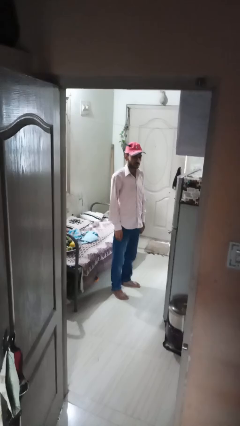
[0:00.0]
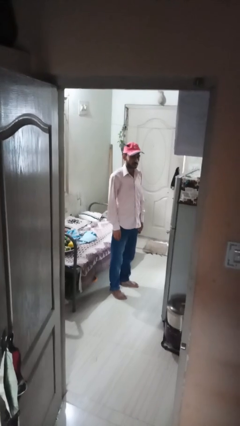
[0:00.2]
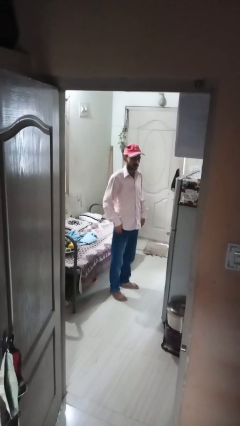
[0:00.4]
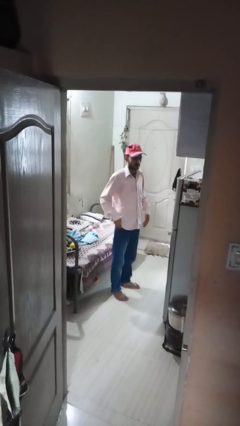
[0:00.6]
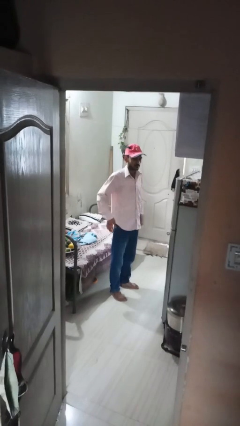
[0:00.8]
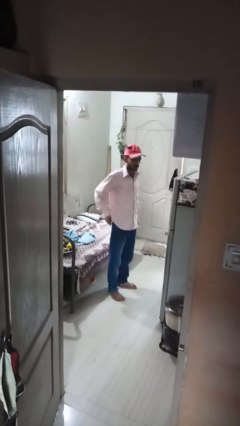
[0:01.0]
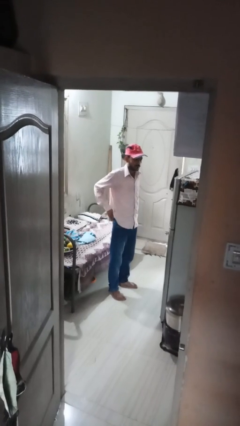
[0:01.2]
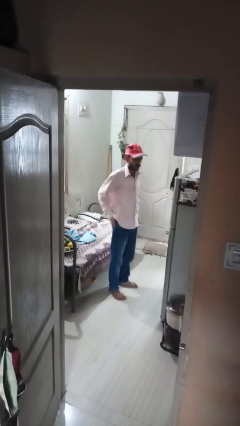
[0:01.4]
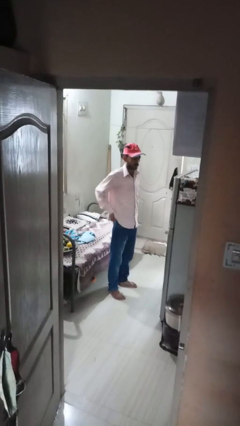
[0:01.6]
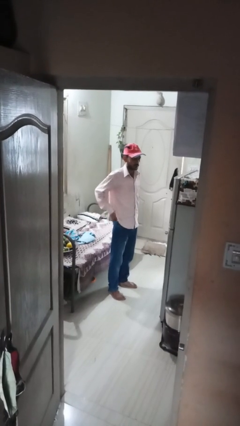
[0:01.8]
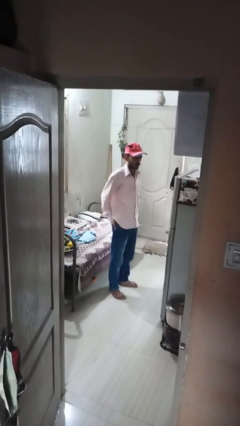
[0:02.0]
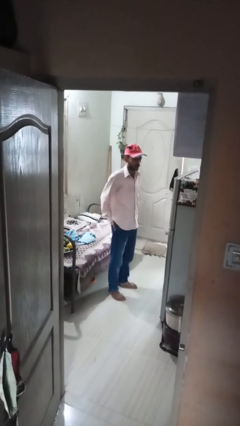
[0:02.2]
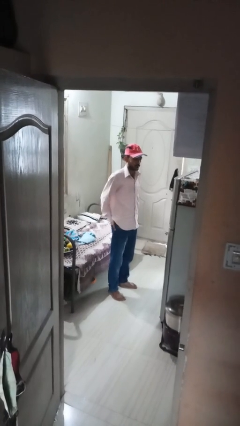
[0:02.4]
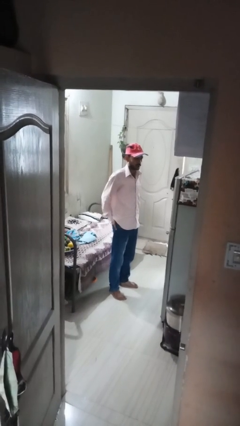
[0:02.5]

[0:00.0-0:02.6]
person puts hands in back pockets

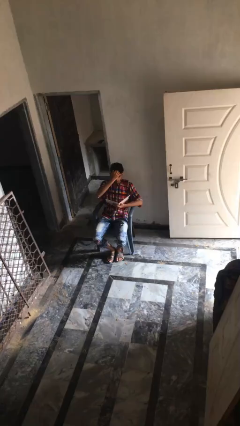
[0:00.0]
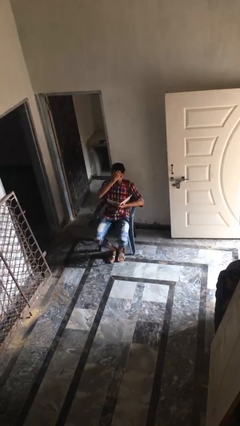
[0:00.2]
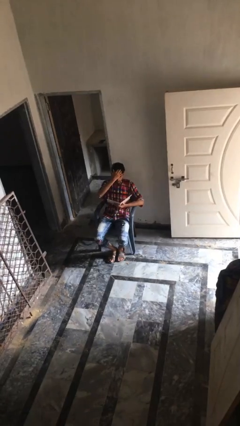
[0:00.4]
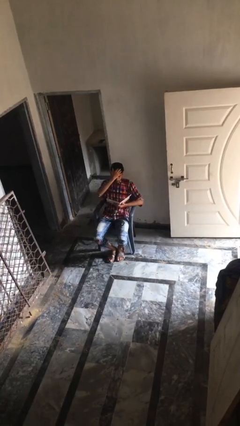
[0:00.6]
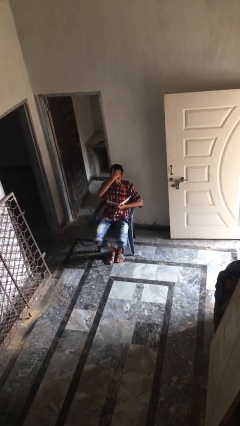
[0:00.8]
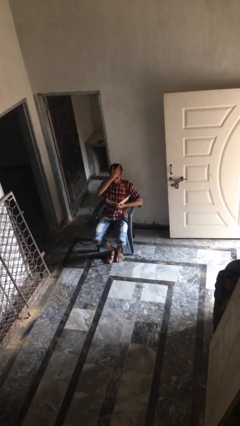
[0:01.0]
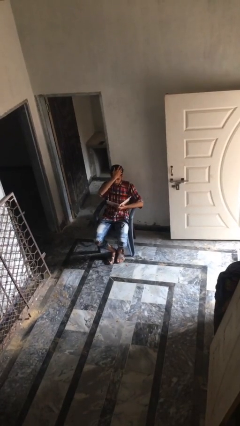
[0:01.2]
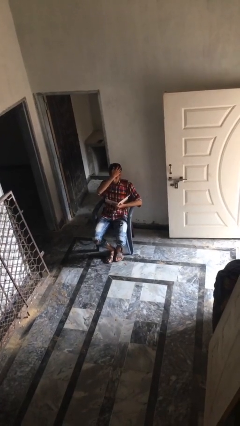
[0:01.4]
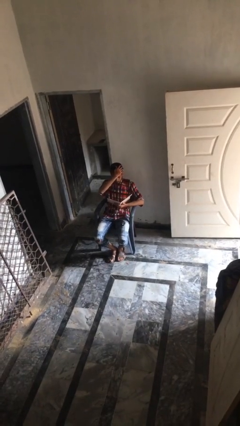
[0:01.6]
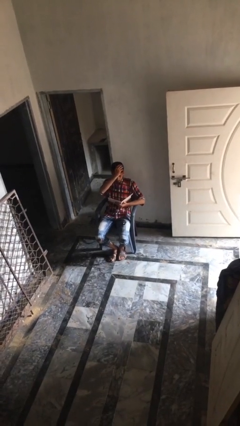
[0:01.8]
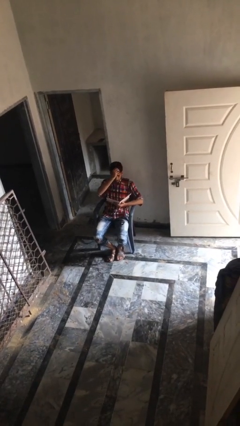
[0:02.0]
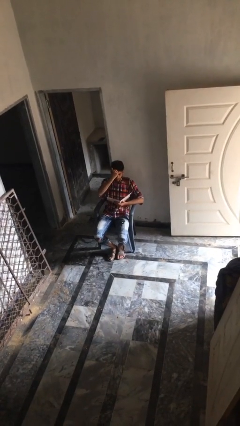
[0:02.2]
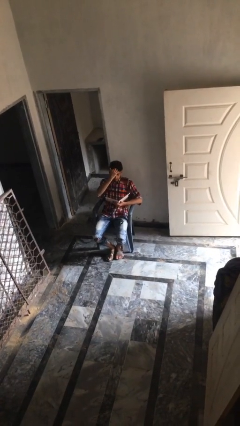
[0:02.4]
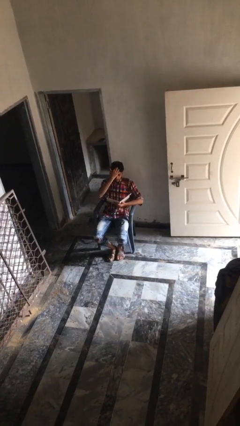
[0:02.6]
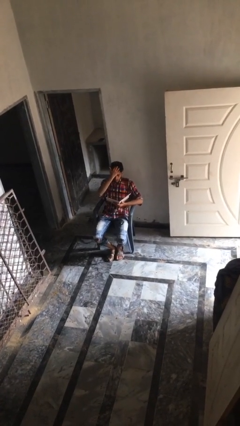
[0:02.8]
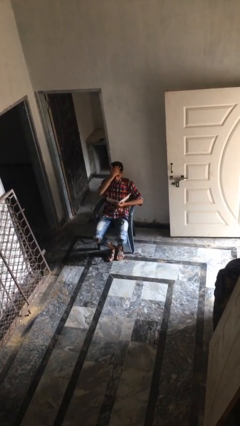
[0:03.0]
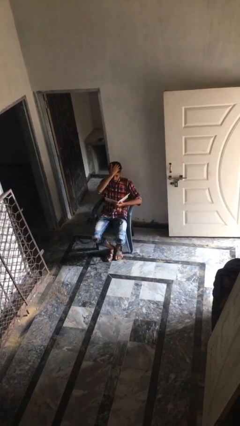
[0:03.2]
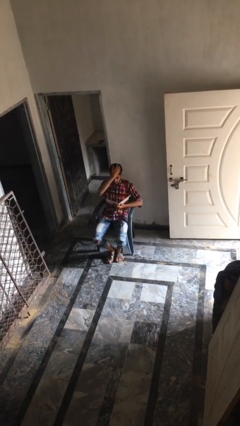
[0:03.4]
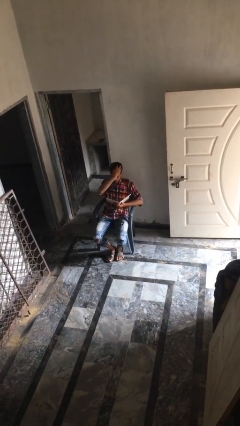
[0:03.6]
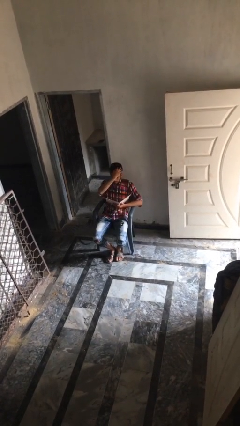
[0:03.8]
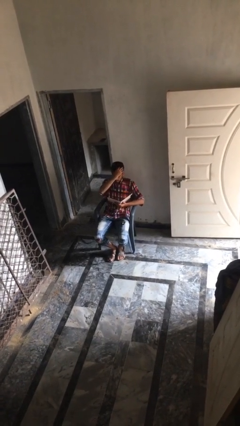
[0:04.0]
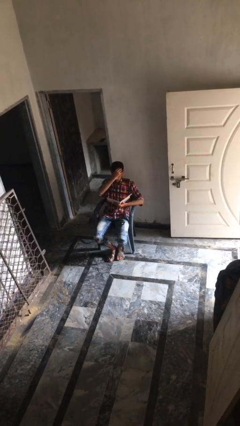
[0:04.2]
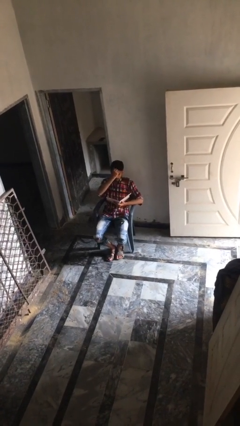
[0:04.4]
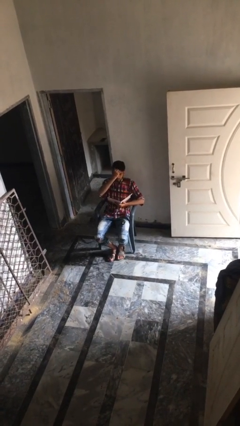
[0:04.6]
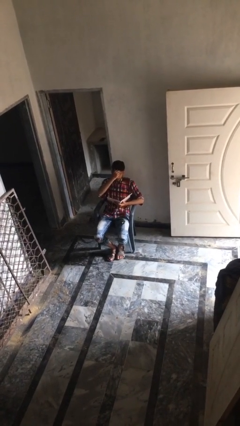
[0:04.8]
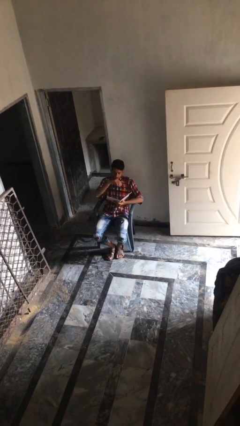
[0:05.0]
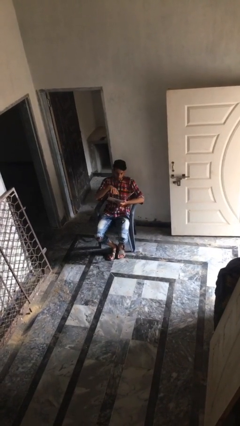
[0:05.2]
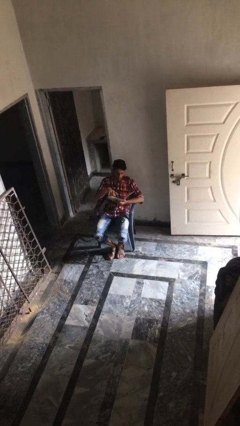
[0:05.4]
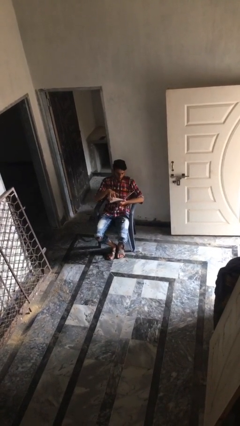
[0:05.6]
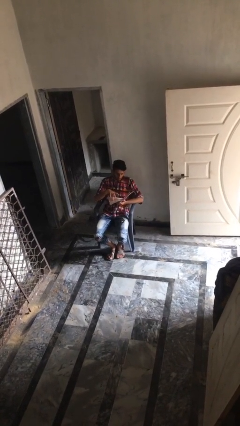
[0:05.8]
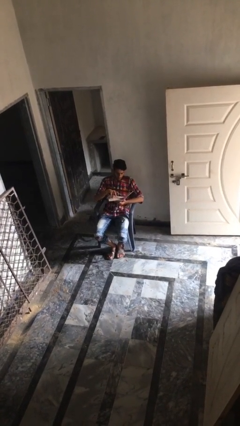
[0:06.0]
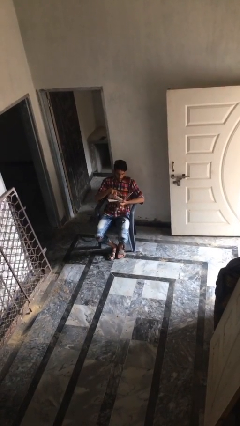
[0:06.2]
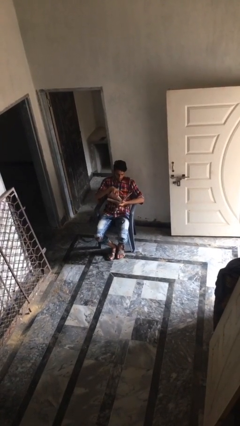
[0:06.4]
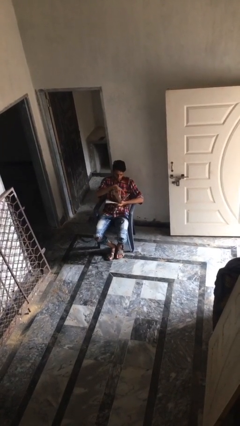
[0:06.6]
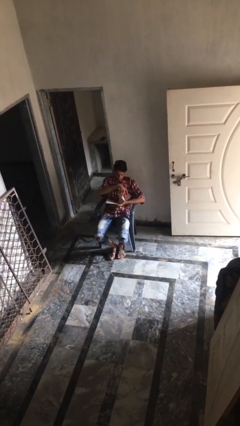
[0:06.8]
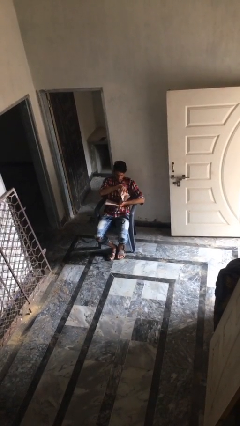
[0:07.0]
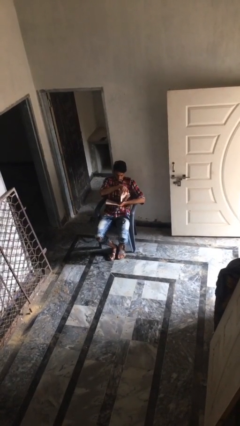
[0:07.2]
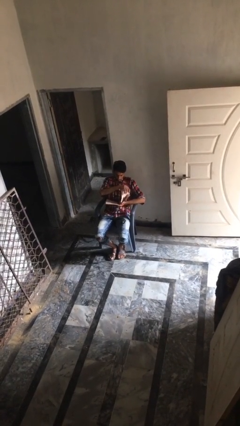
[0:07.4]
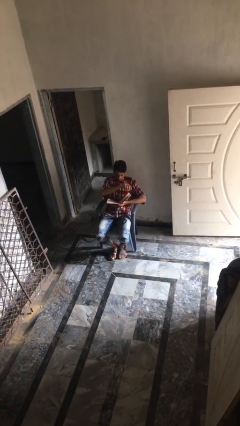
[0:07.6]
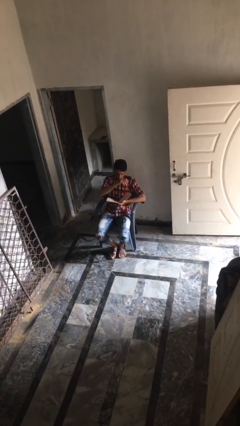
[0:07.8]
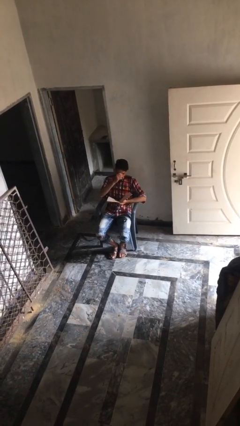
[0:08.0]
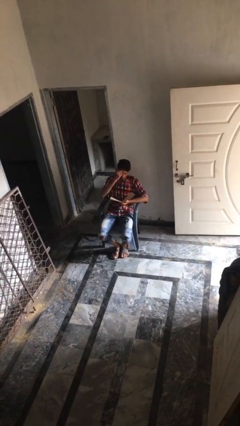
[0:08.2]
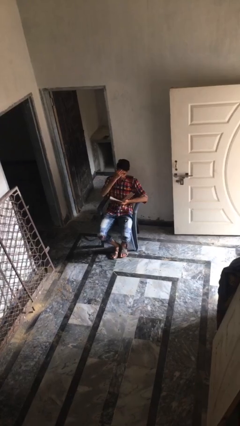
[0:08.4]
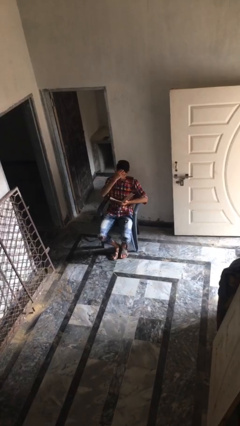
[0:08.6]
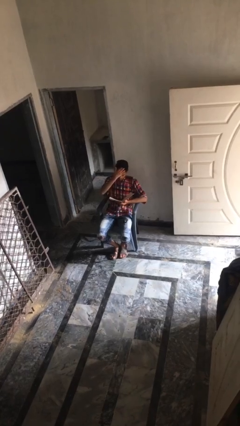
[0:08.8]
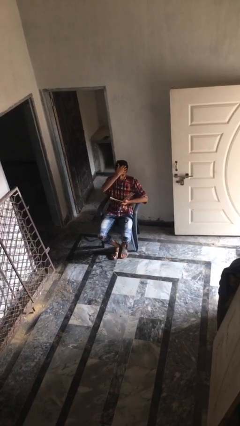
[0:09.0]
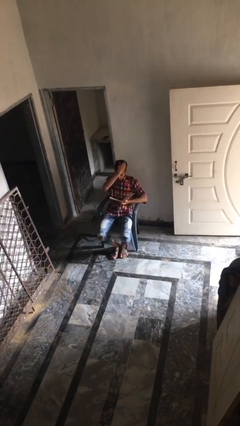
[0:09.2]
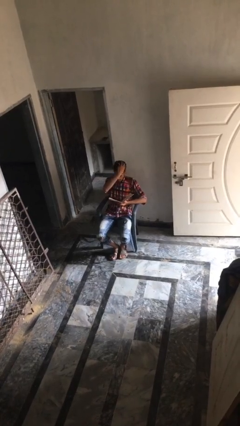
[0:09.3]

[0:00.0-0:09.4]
person reads document

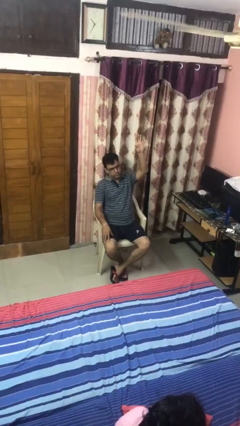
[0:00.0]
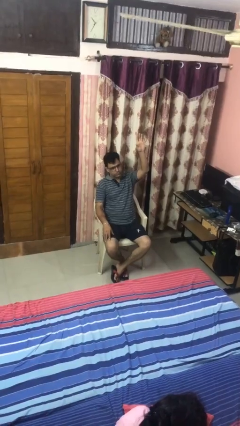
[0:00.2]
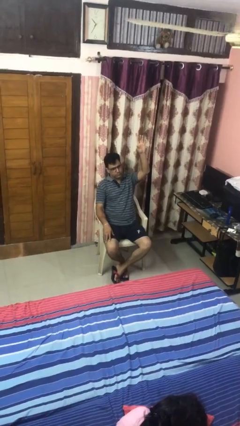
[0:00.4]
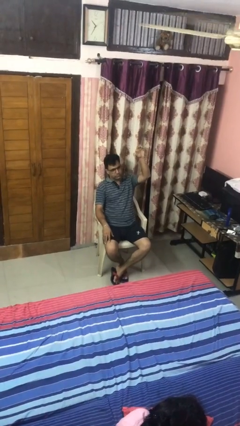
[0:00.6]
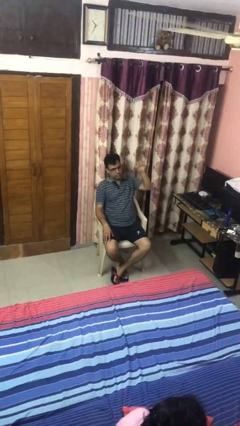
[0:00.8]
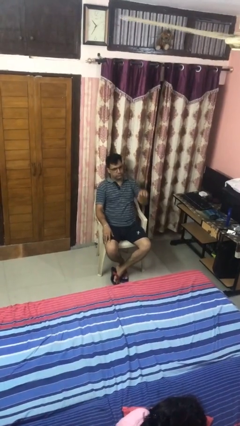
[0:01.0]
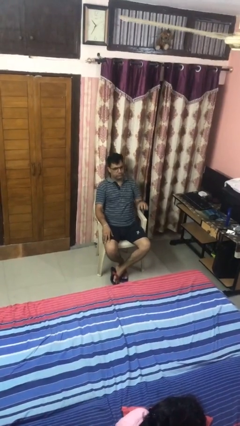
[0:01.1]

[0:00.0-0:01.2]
person gestures lower hand

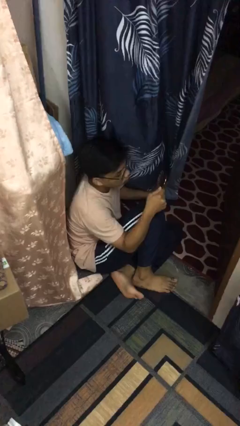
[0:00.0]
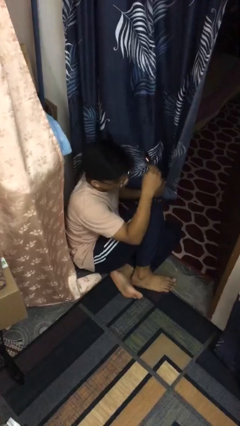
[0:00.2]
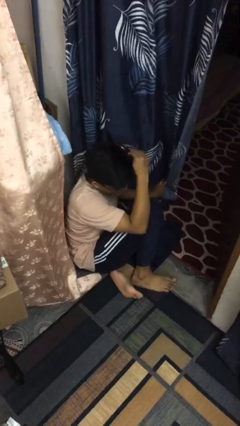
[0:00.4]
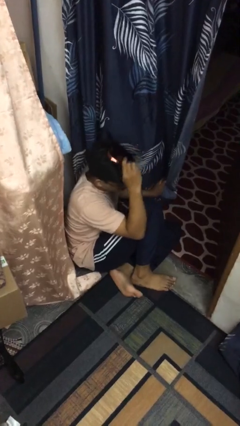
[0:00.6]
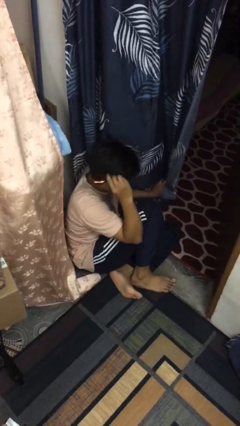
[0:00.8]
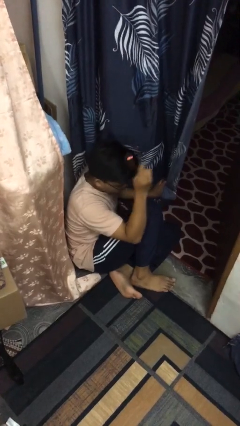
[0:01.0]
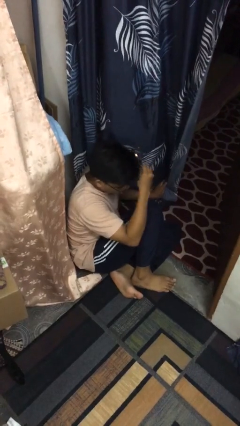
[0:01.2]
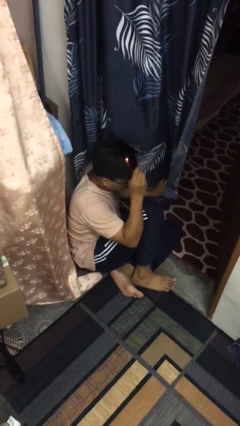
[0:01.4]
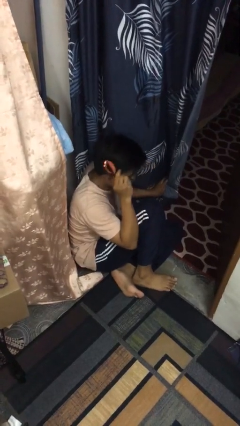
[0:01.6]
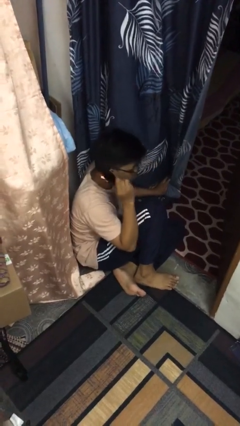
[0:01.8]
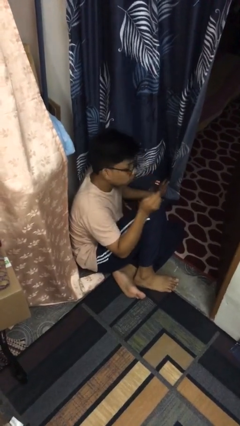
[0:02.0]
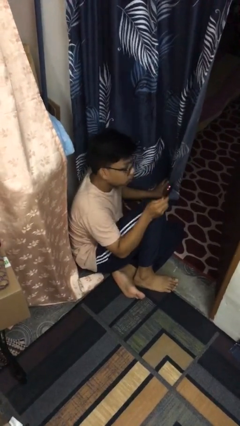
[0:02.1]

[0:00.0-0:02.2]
person brushes hair

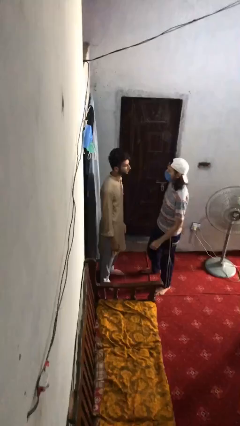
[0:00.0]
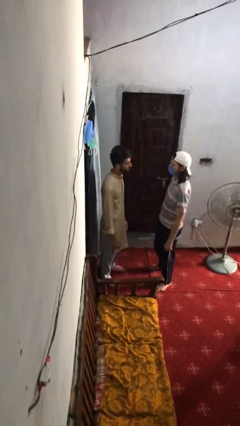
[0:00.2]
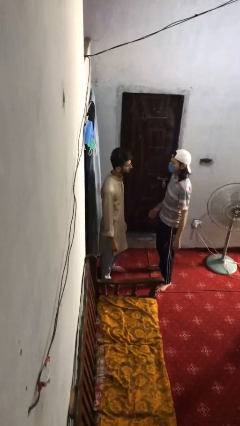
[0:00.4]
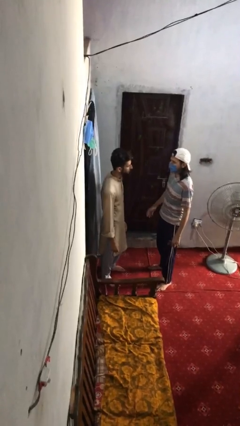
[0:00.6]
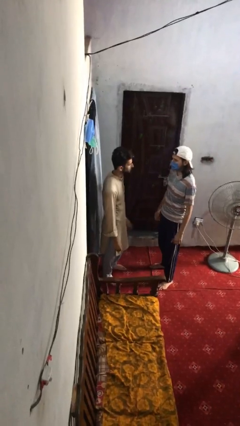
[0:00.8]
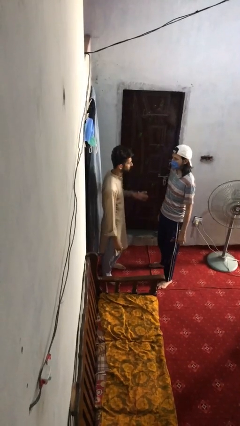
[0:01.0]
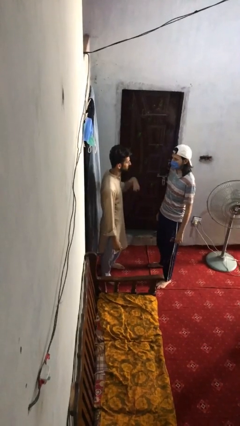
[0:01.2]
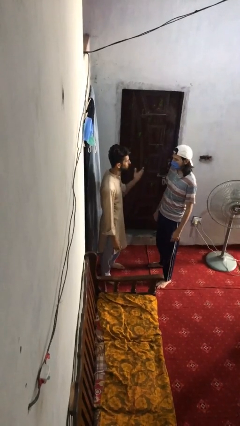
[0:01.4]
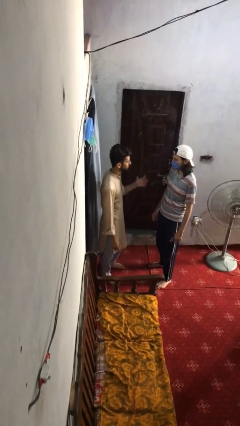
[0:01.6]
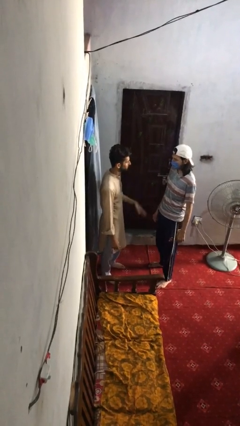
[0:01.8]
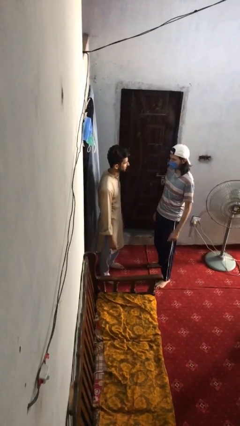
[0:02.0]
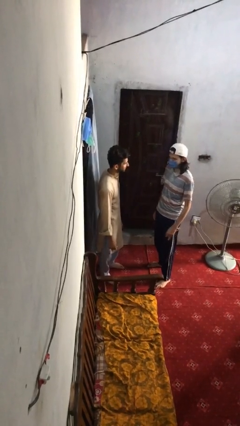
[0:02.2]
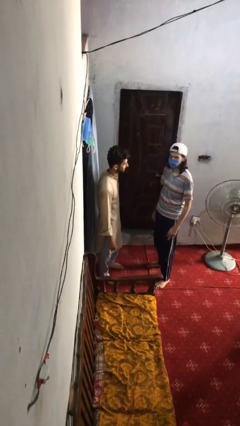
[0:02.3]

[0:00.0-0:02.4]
person talks to person

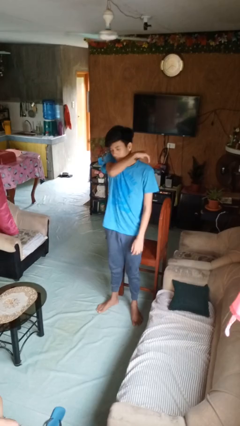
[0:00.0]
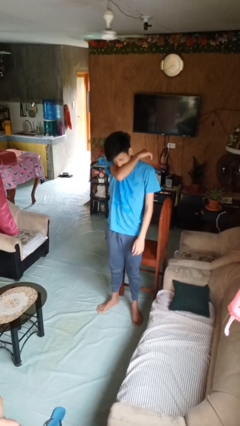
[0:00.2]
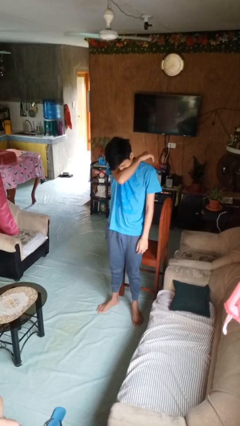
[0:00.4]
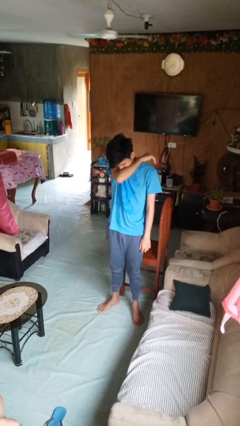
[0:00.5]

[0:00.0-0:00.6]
person sneezes into arm
